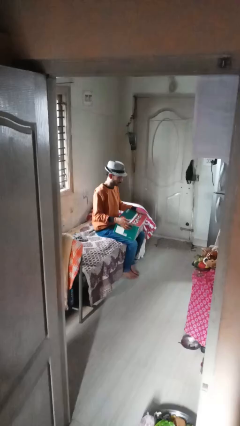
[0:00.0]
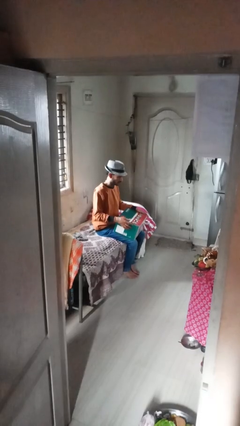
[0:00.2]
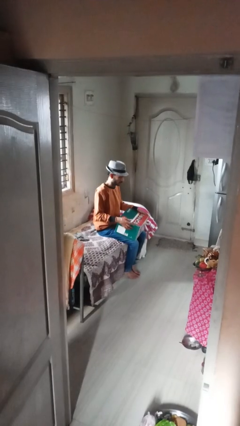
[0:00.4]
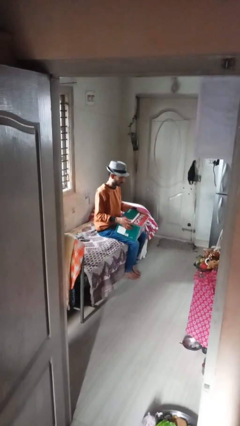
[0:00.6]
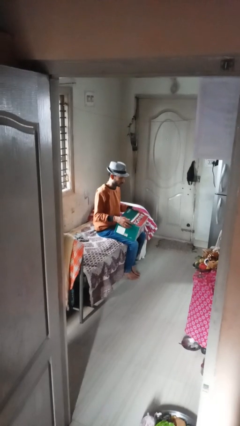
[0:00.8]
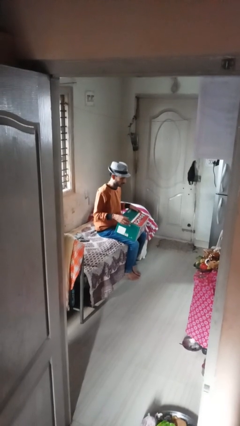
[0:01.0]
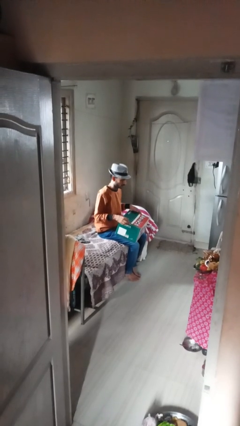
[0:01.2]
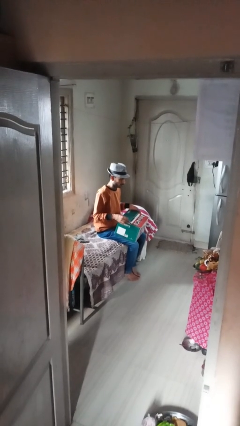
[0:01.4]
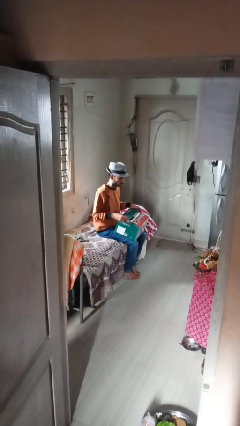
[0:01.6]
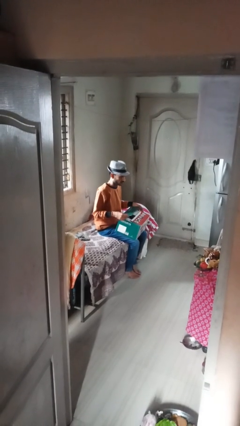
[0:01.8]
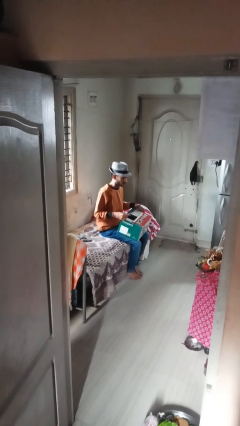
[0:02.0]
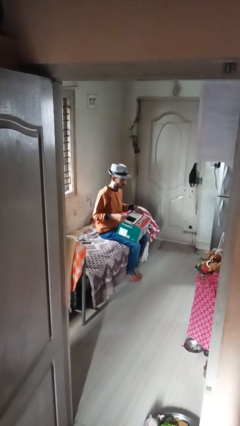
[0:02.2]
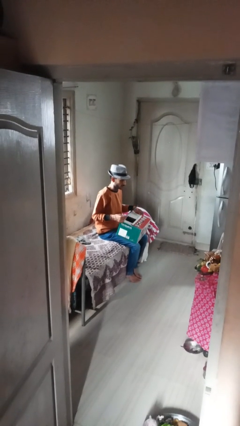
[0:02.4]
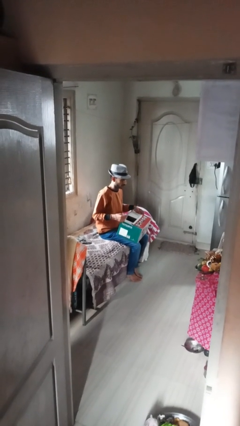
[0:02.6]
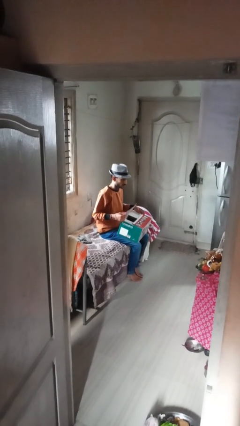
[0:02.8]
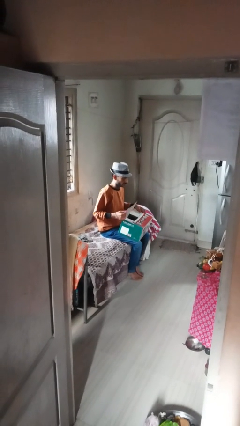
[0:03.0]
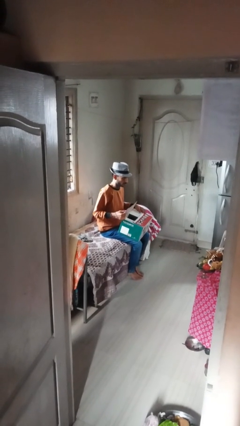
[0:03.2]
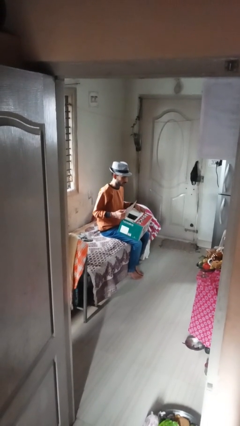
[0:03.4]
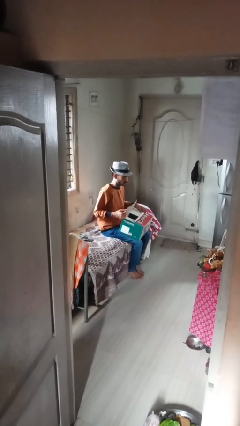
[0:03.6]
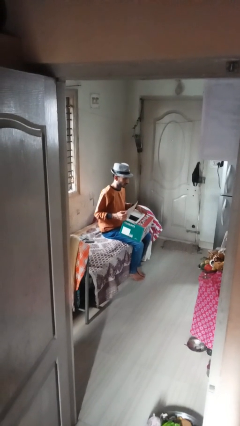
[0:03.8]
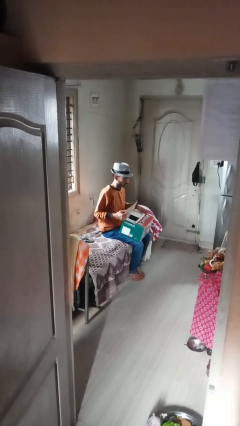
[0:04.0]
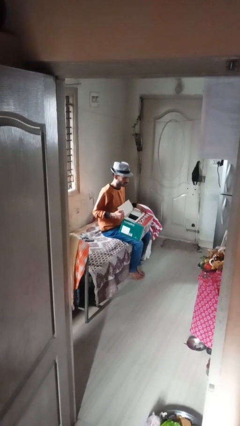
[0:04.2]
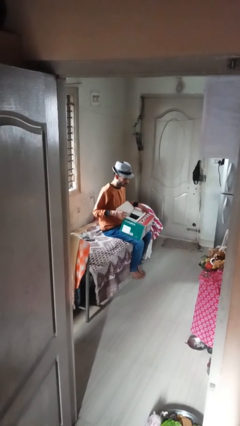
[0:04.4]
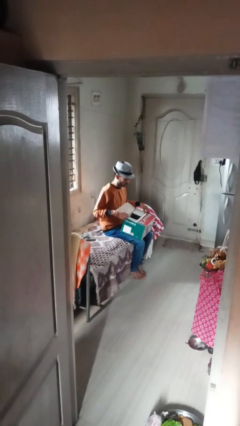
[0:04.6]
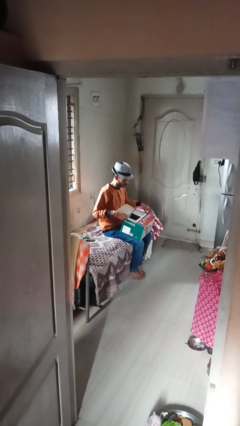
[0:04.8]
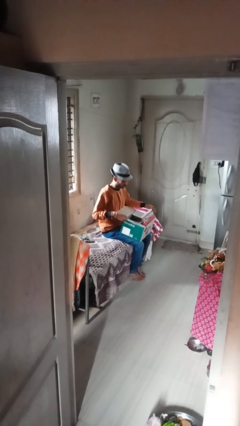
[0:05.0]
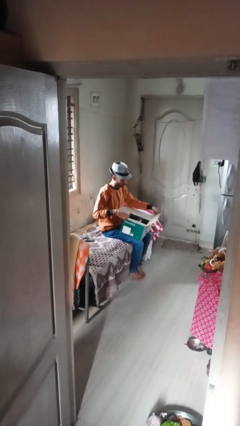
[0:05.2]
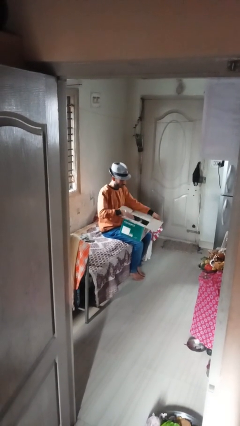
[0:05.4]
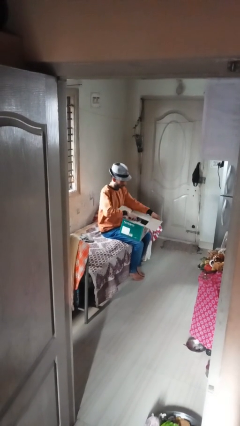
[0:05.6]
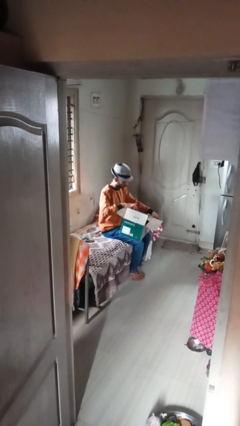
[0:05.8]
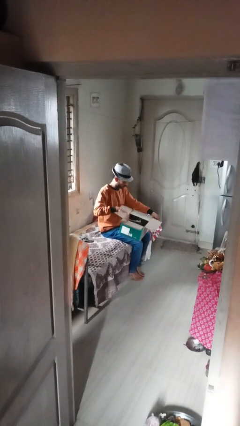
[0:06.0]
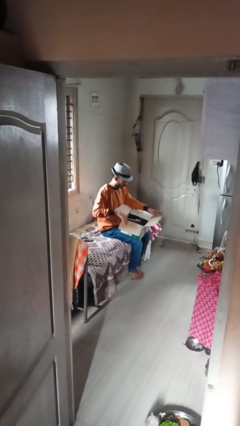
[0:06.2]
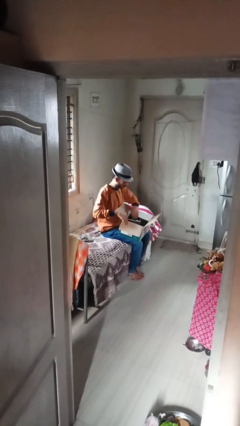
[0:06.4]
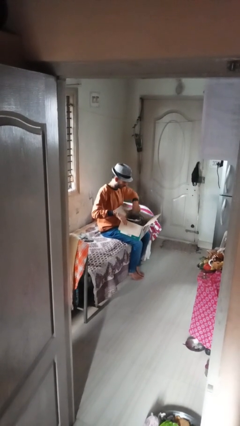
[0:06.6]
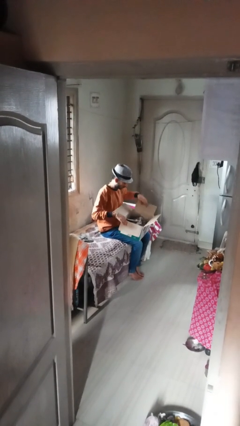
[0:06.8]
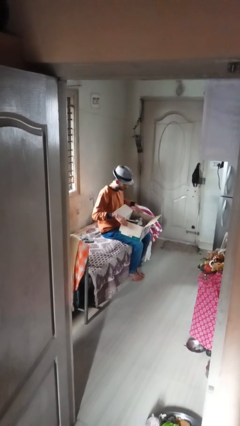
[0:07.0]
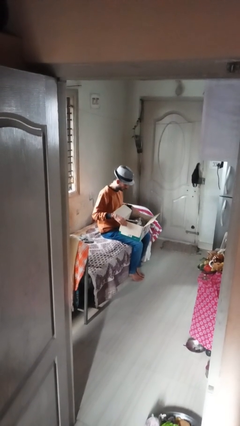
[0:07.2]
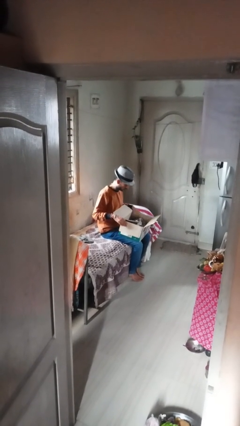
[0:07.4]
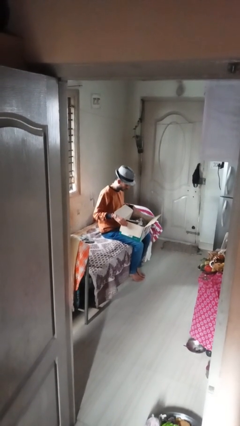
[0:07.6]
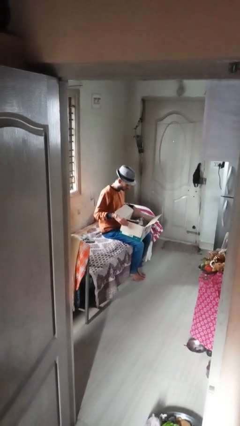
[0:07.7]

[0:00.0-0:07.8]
person opens box

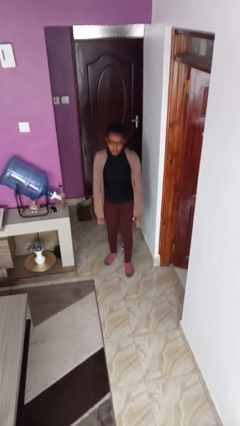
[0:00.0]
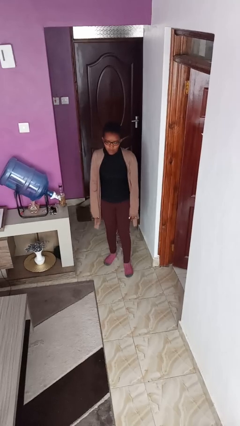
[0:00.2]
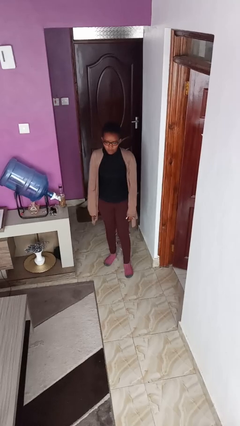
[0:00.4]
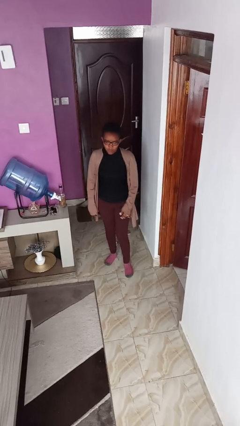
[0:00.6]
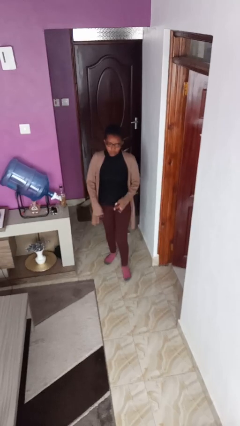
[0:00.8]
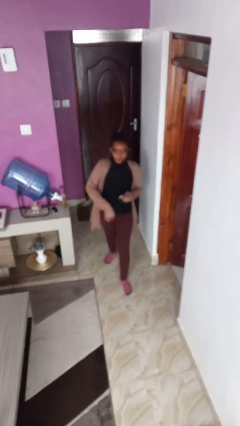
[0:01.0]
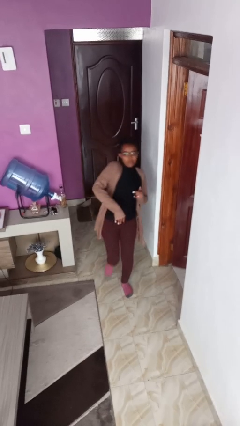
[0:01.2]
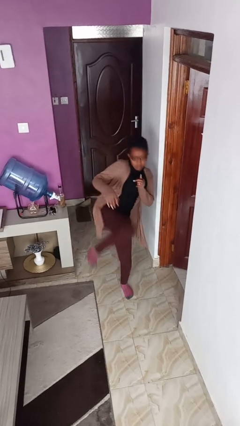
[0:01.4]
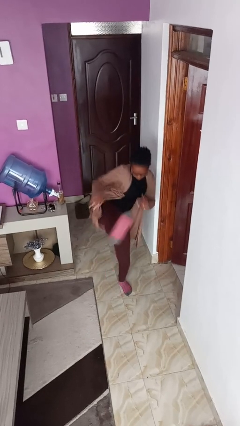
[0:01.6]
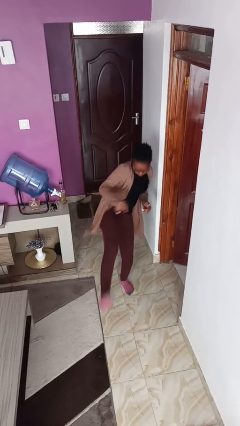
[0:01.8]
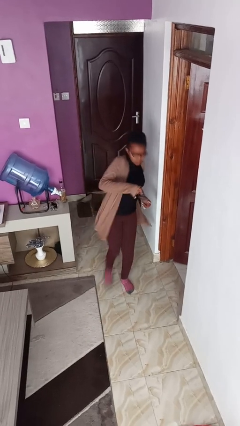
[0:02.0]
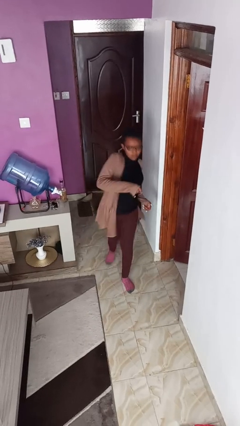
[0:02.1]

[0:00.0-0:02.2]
person karate kicks

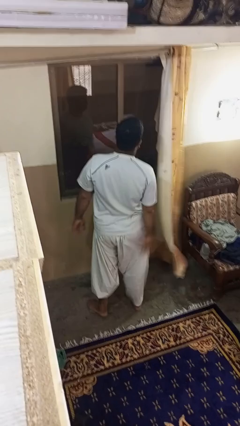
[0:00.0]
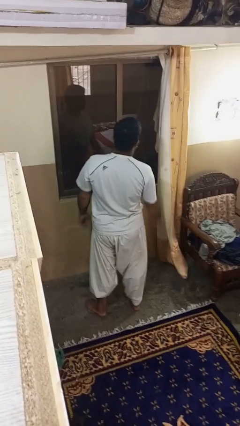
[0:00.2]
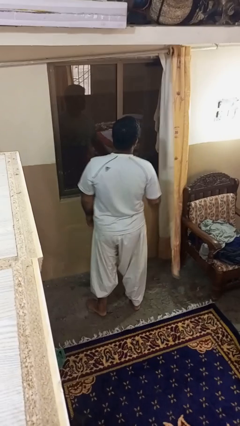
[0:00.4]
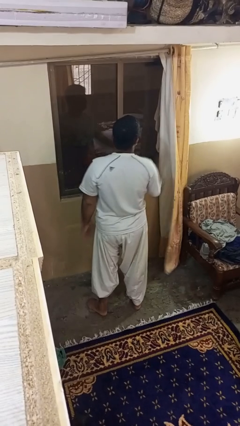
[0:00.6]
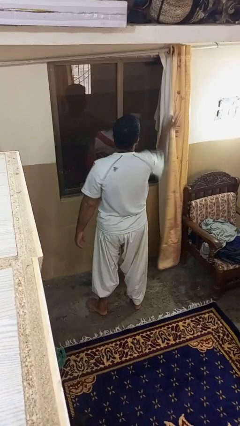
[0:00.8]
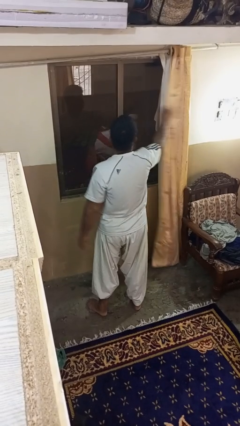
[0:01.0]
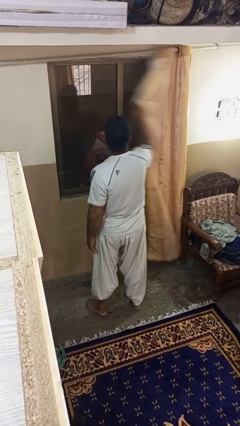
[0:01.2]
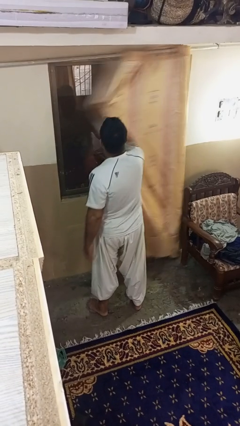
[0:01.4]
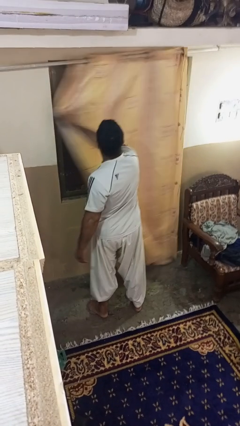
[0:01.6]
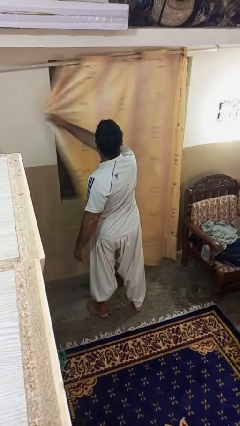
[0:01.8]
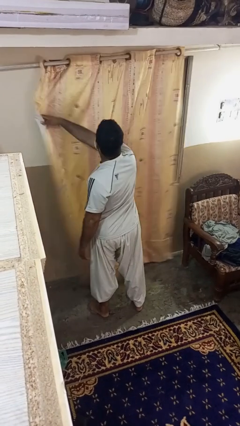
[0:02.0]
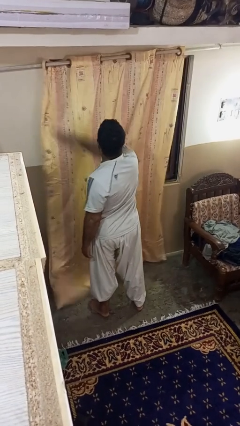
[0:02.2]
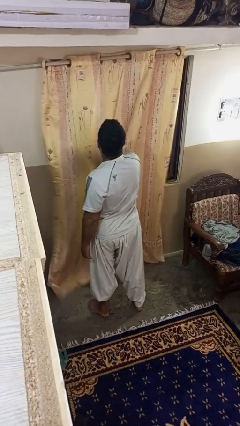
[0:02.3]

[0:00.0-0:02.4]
person closes curtains

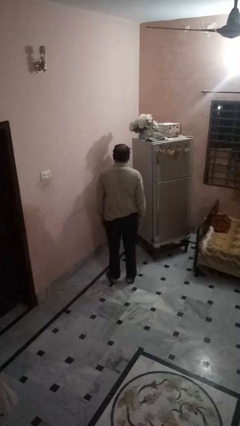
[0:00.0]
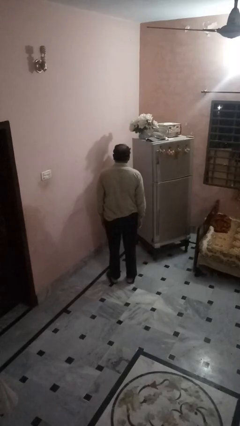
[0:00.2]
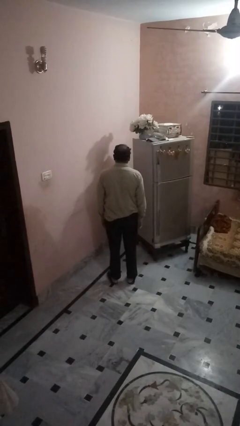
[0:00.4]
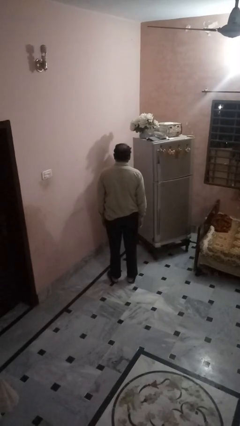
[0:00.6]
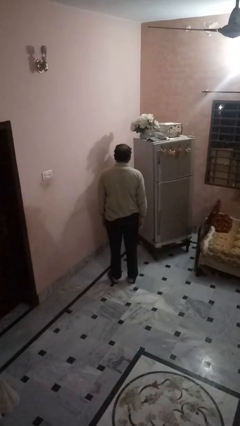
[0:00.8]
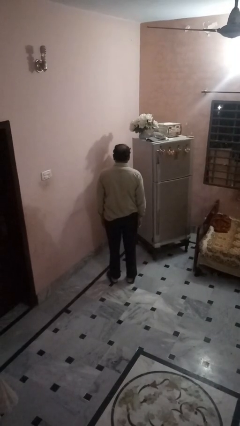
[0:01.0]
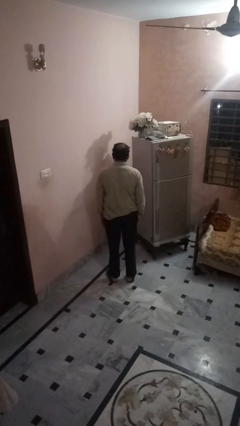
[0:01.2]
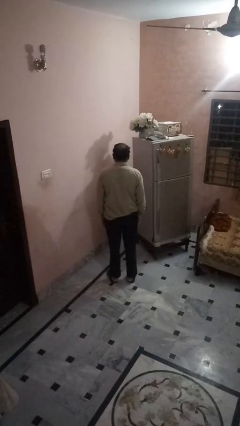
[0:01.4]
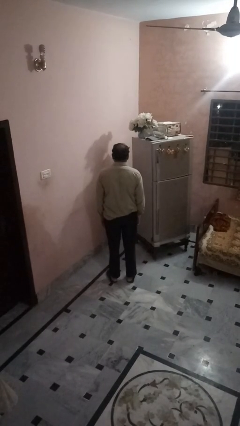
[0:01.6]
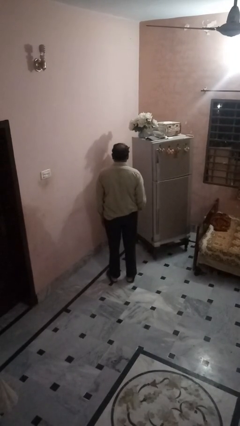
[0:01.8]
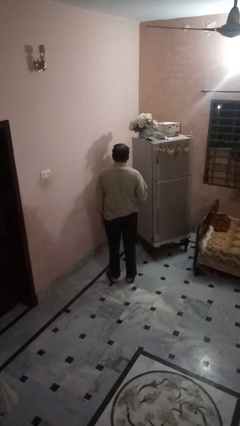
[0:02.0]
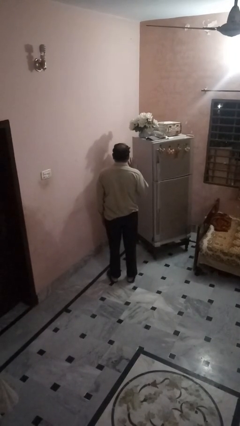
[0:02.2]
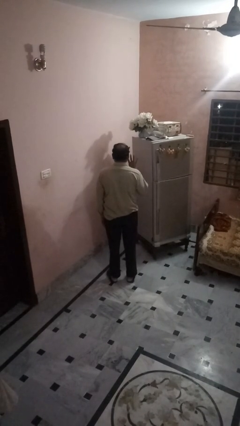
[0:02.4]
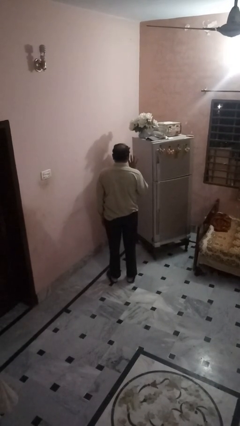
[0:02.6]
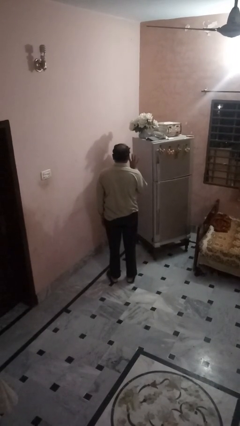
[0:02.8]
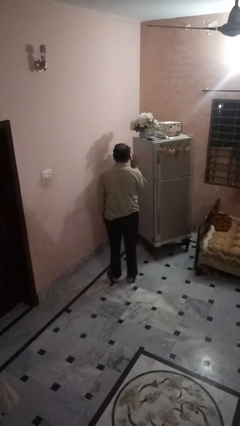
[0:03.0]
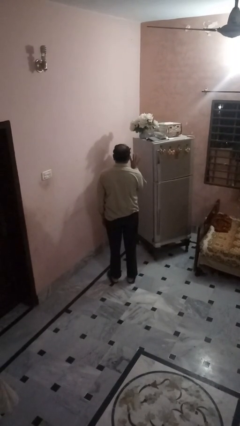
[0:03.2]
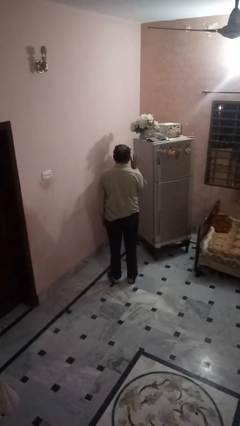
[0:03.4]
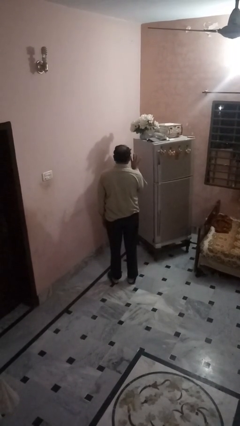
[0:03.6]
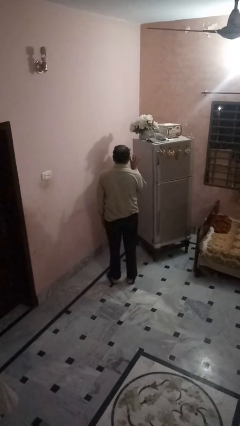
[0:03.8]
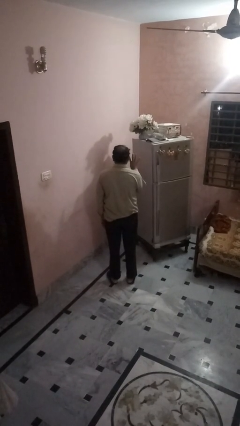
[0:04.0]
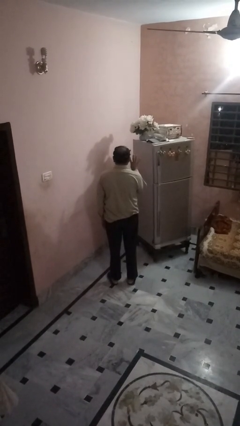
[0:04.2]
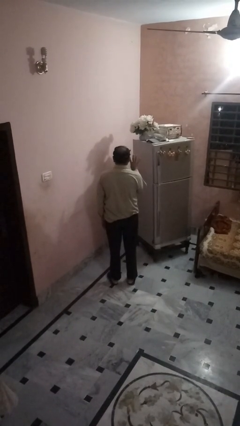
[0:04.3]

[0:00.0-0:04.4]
person gestures number four

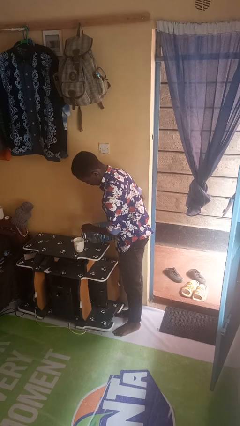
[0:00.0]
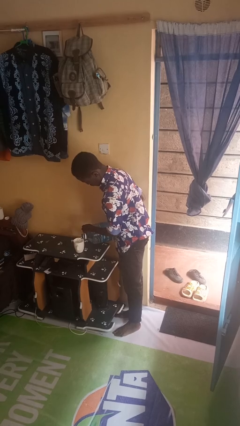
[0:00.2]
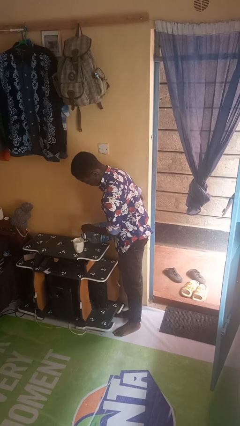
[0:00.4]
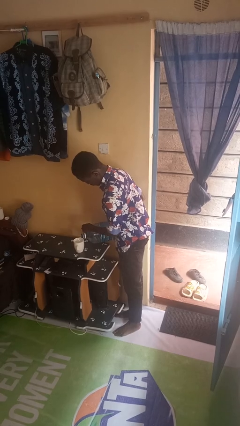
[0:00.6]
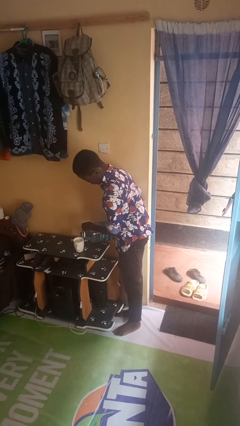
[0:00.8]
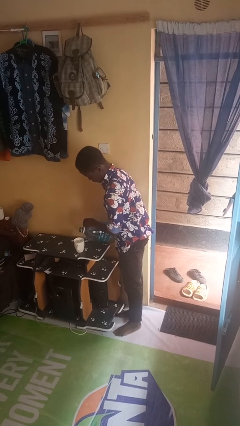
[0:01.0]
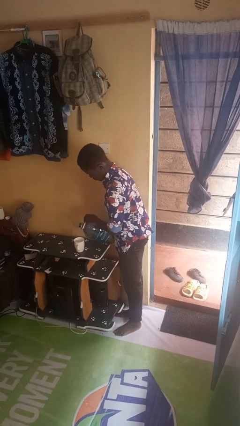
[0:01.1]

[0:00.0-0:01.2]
person pours liquid into cup
